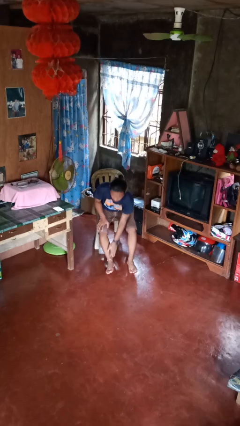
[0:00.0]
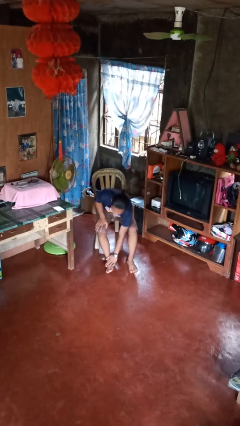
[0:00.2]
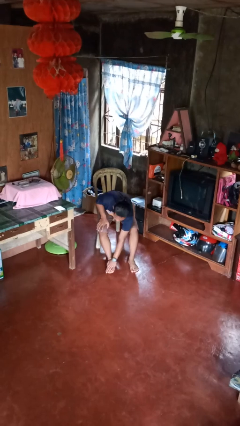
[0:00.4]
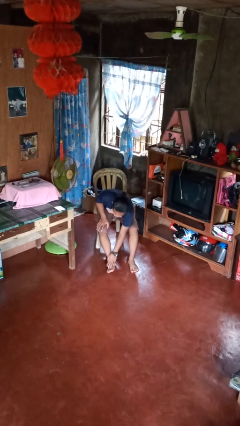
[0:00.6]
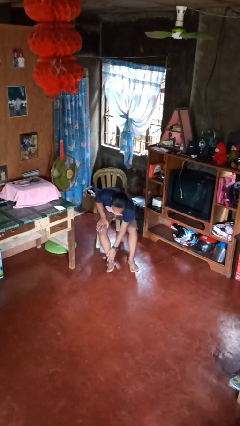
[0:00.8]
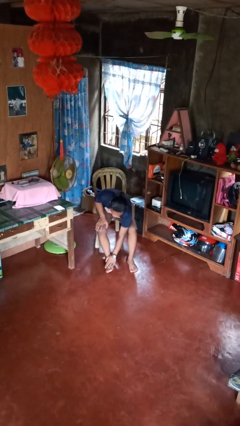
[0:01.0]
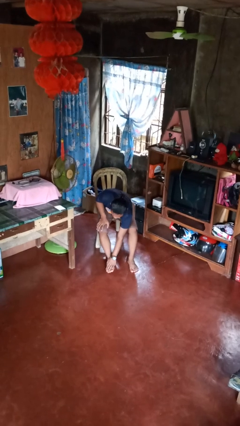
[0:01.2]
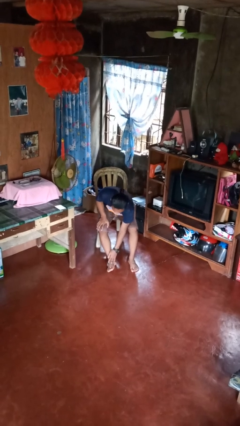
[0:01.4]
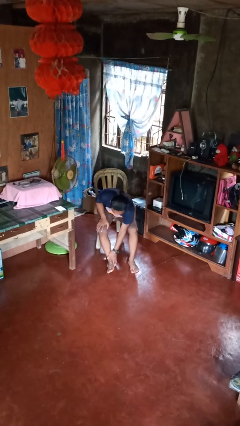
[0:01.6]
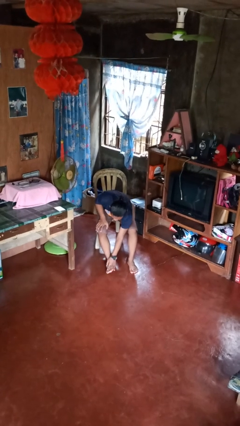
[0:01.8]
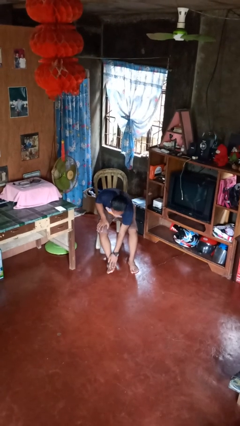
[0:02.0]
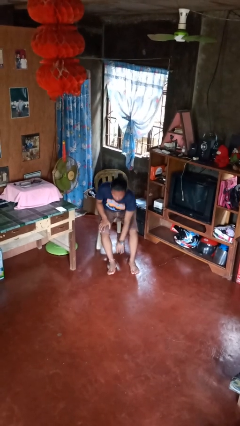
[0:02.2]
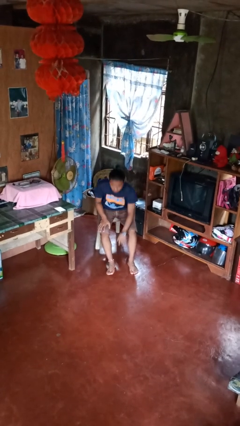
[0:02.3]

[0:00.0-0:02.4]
person rubs foot

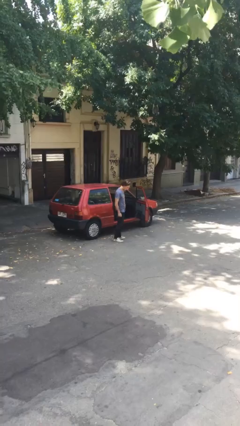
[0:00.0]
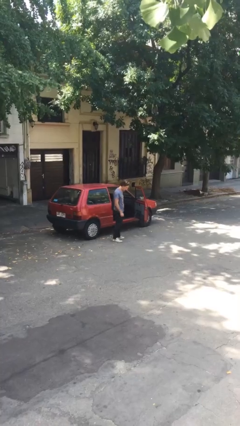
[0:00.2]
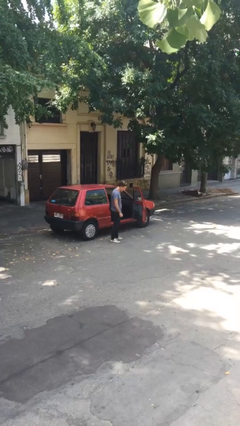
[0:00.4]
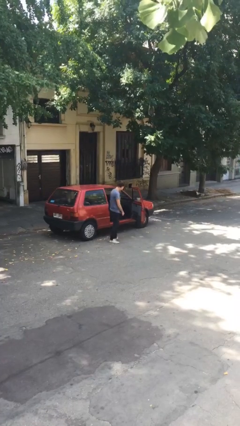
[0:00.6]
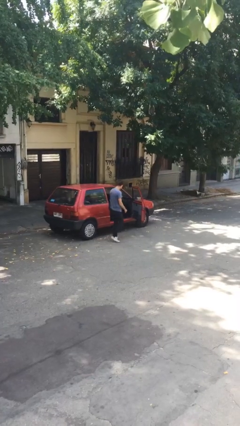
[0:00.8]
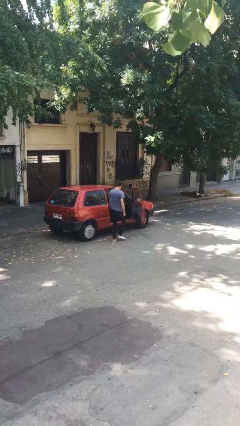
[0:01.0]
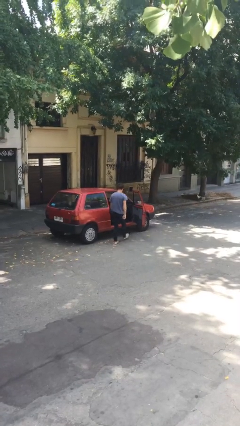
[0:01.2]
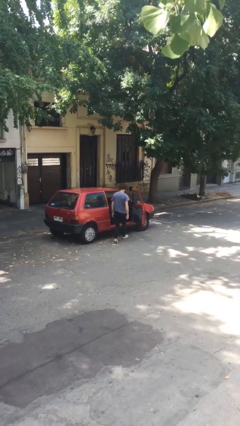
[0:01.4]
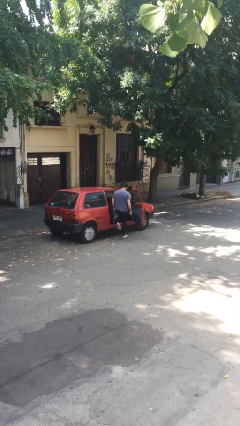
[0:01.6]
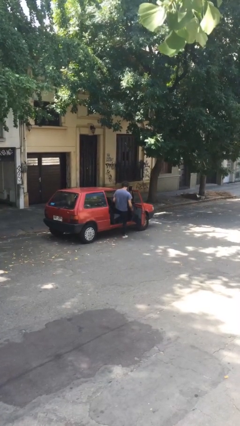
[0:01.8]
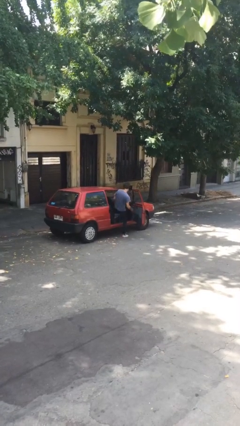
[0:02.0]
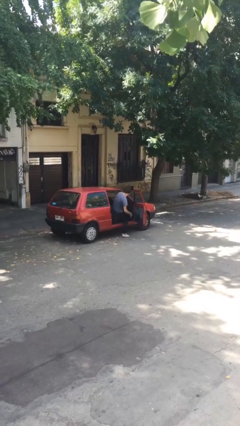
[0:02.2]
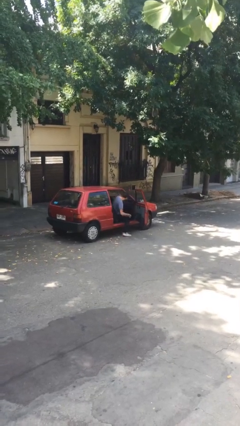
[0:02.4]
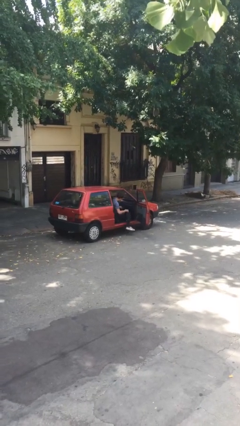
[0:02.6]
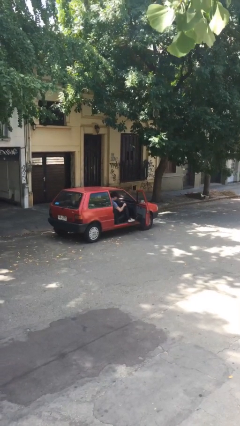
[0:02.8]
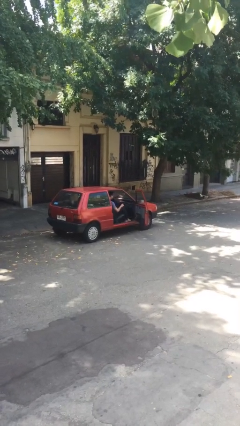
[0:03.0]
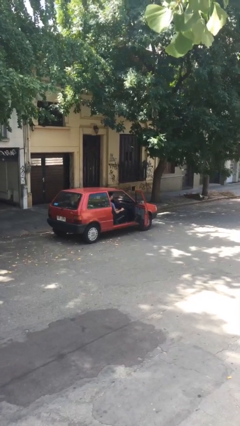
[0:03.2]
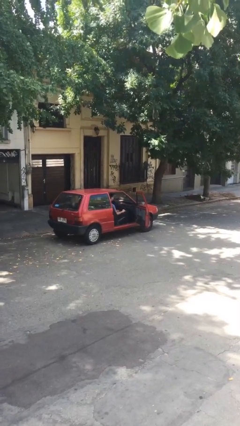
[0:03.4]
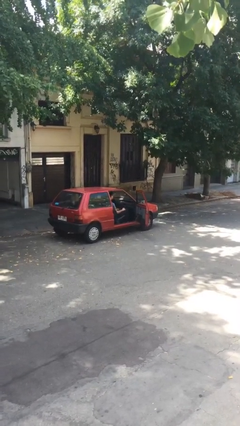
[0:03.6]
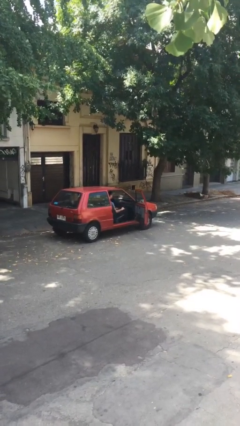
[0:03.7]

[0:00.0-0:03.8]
person enters car

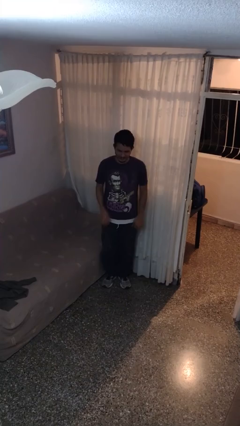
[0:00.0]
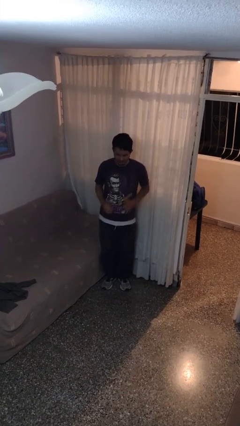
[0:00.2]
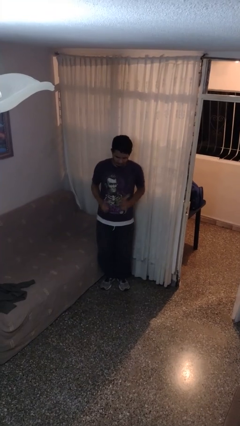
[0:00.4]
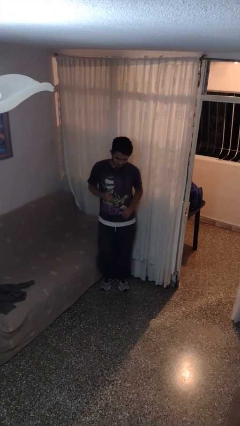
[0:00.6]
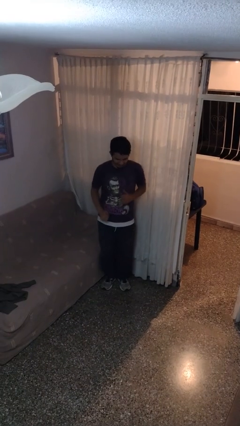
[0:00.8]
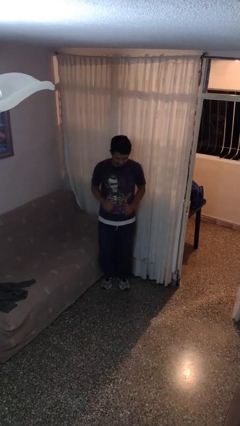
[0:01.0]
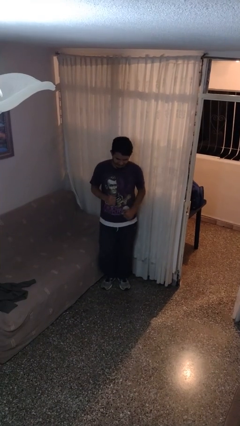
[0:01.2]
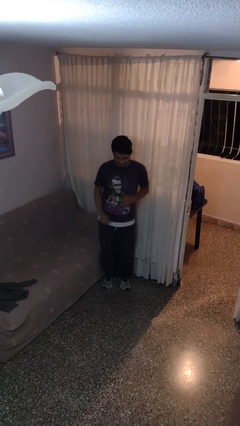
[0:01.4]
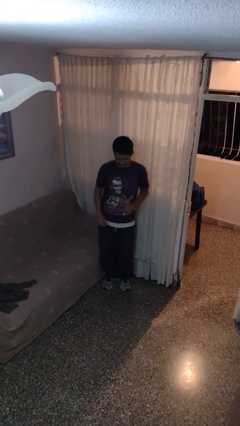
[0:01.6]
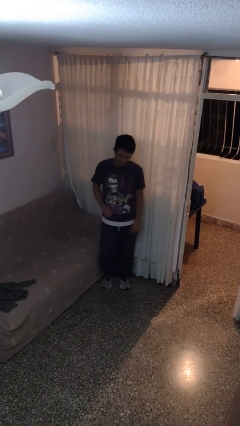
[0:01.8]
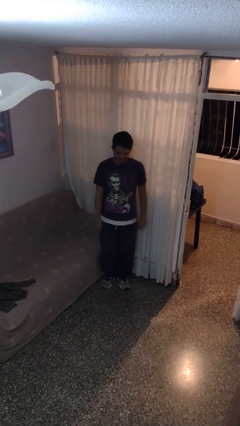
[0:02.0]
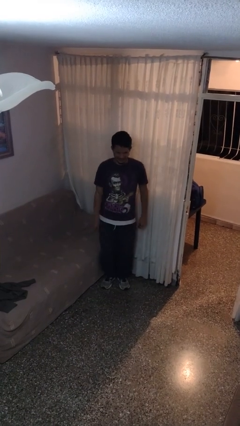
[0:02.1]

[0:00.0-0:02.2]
person dances in place

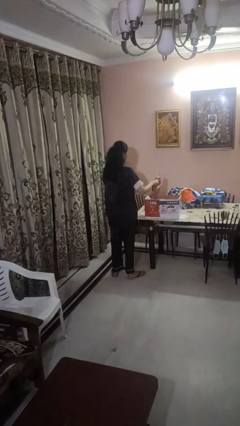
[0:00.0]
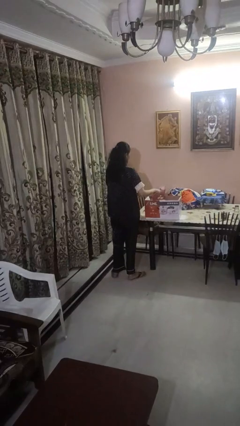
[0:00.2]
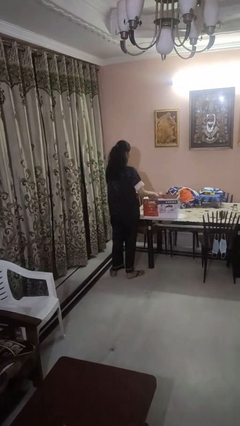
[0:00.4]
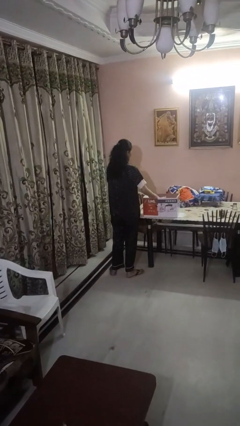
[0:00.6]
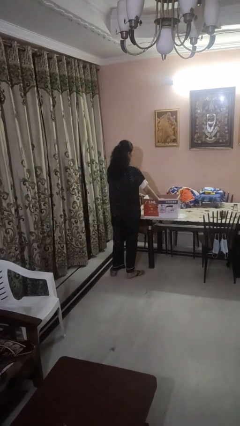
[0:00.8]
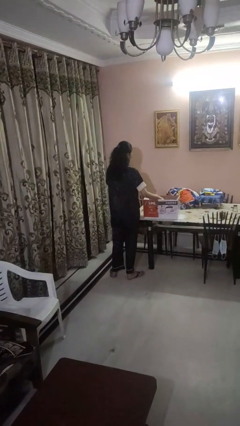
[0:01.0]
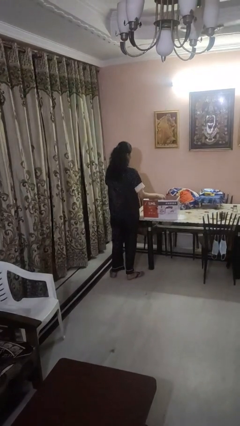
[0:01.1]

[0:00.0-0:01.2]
person puts object into box

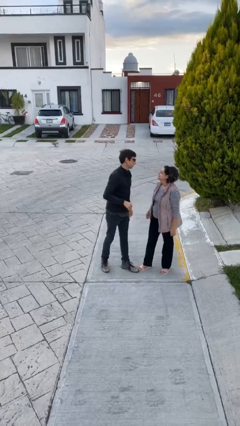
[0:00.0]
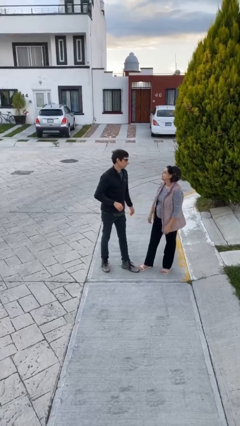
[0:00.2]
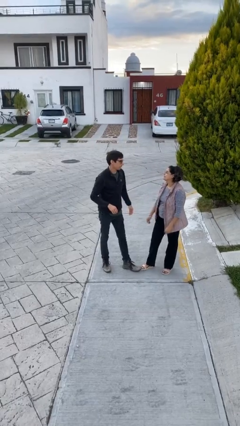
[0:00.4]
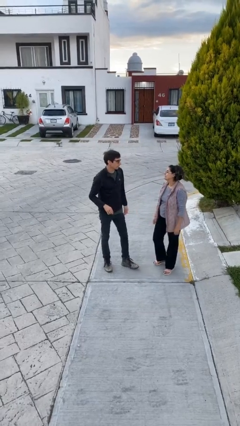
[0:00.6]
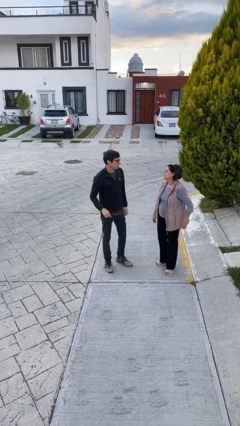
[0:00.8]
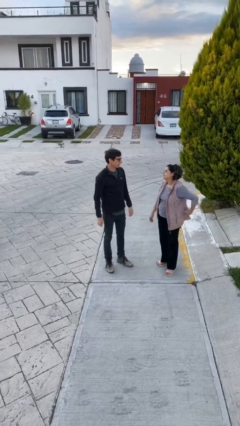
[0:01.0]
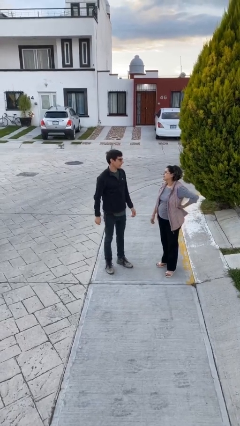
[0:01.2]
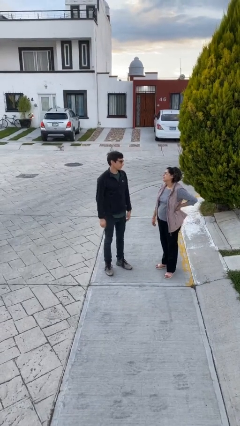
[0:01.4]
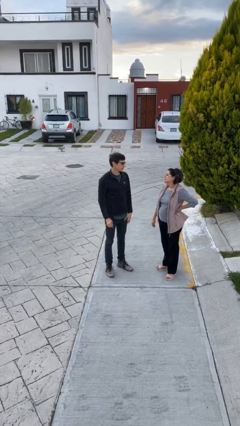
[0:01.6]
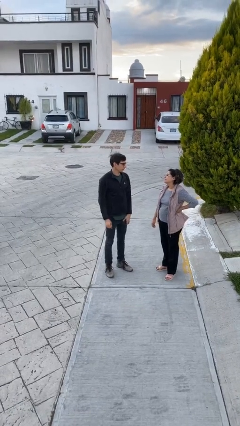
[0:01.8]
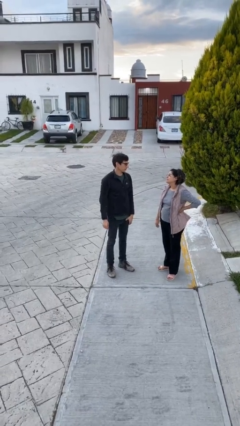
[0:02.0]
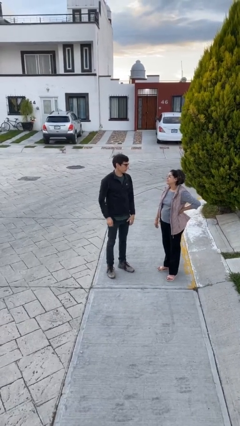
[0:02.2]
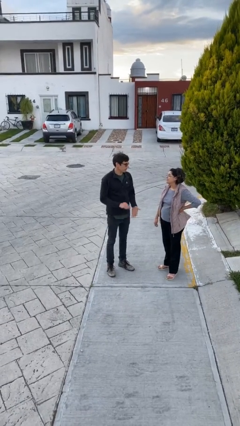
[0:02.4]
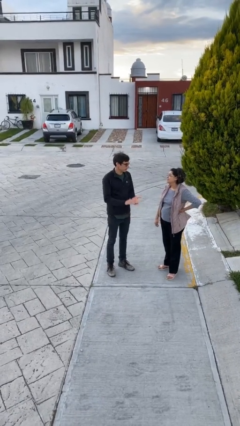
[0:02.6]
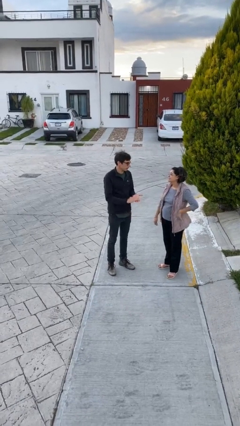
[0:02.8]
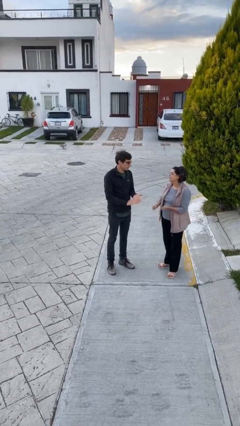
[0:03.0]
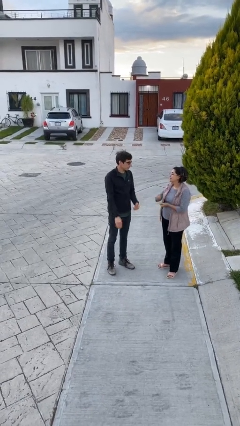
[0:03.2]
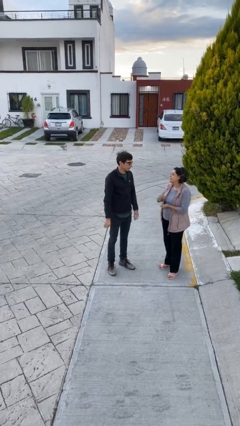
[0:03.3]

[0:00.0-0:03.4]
person talks to person

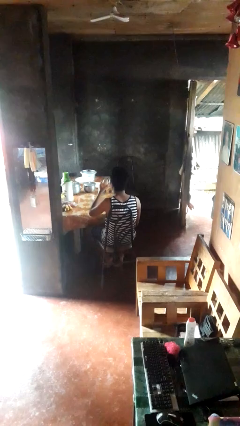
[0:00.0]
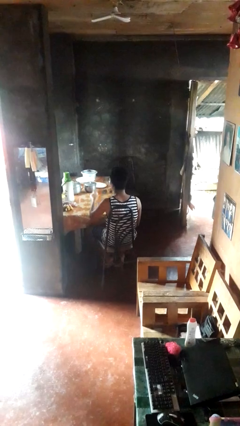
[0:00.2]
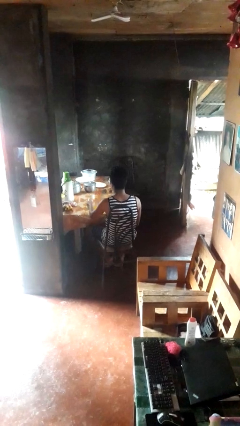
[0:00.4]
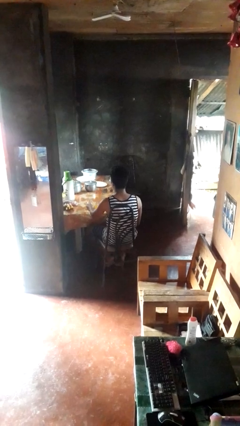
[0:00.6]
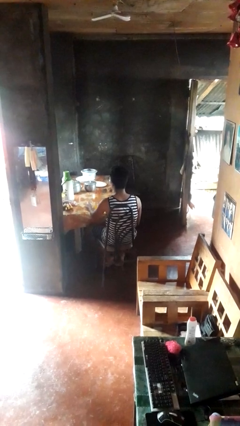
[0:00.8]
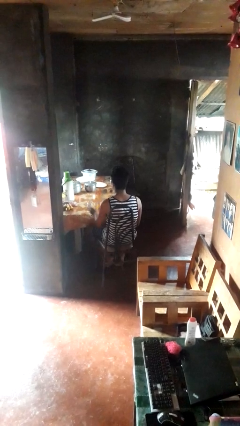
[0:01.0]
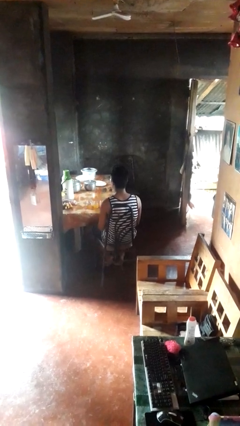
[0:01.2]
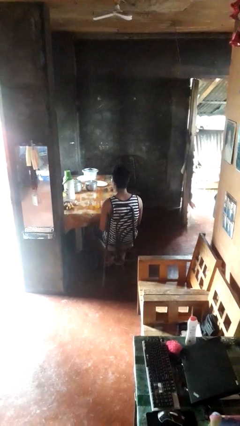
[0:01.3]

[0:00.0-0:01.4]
person puts down object on table

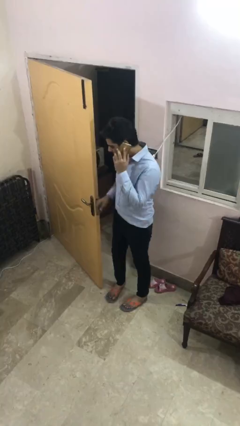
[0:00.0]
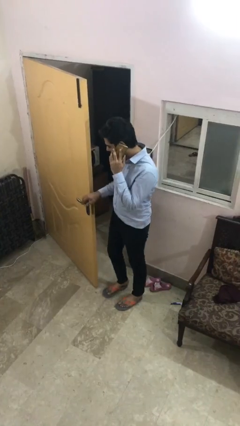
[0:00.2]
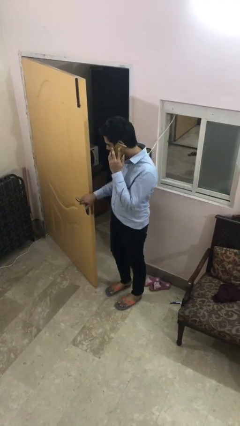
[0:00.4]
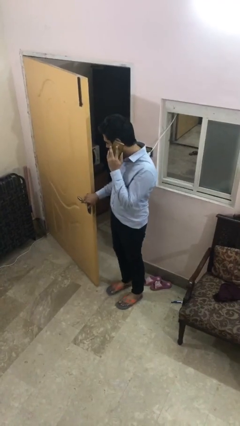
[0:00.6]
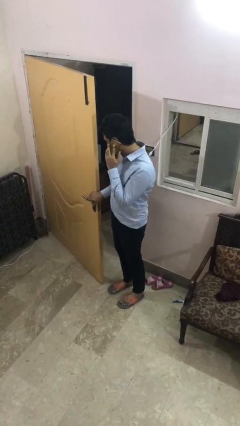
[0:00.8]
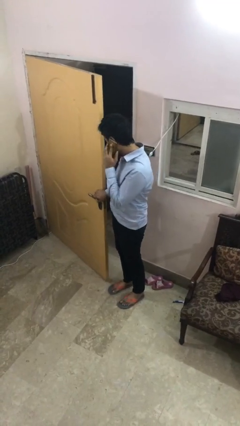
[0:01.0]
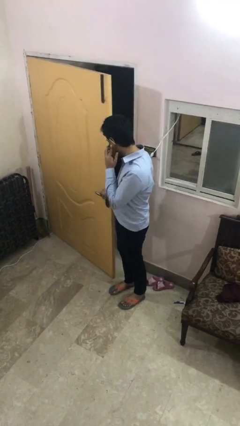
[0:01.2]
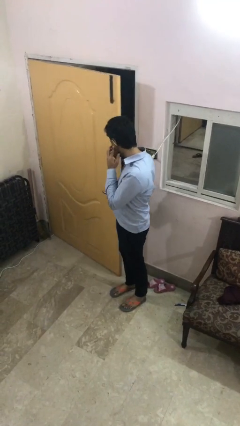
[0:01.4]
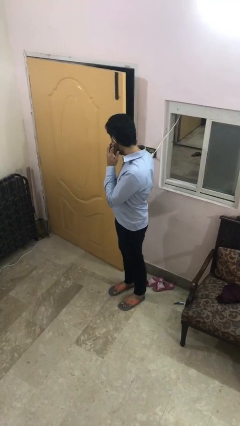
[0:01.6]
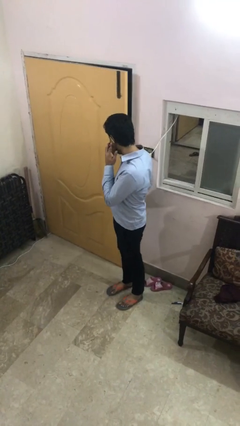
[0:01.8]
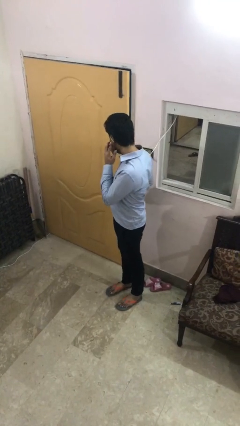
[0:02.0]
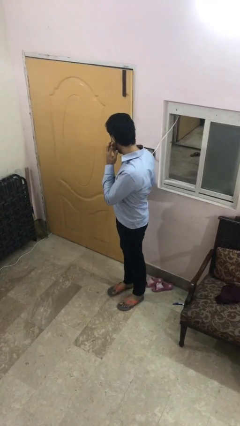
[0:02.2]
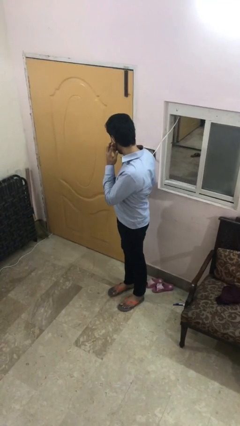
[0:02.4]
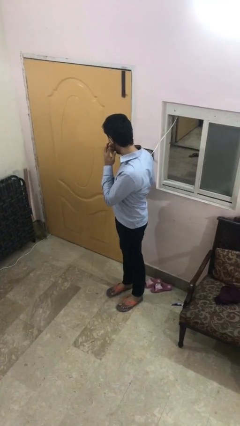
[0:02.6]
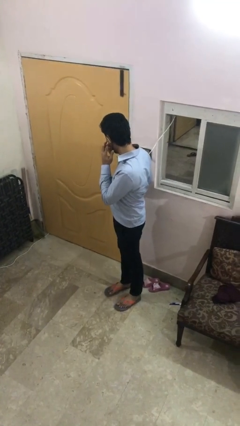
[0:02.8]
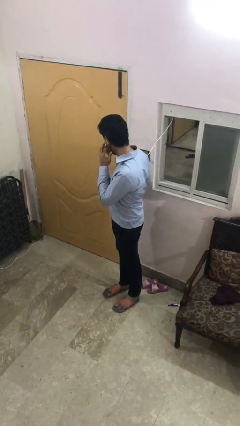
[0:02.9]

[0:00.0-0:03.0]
person closes facility door
